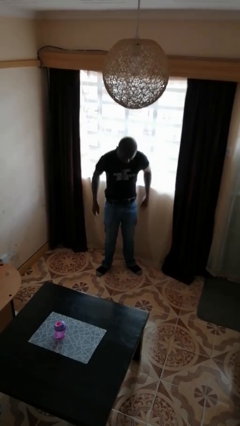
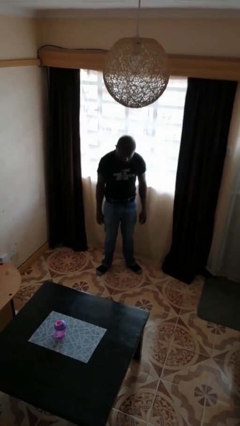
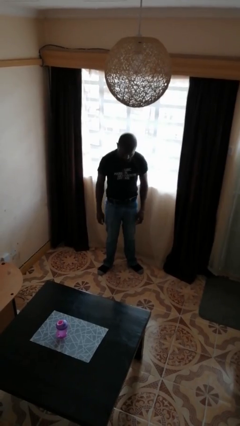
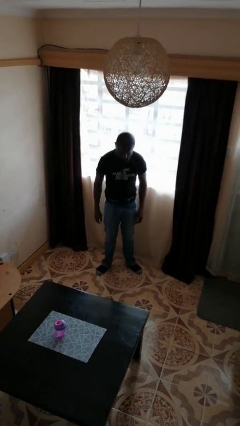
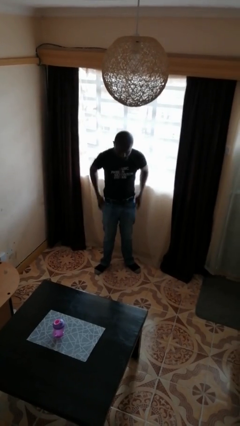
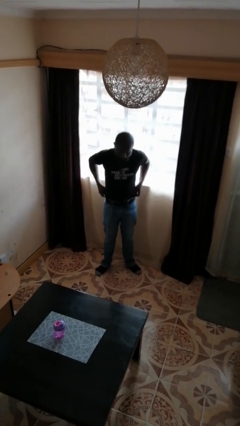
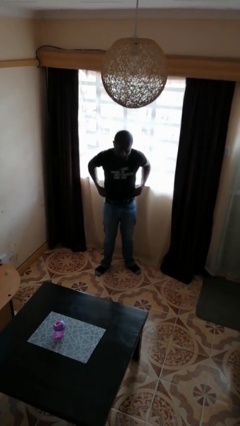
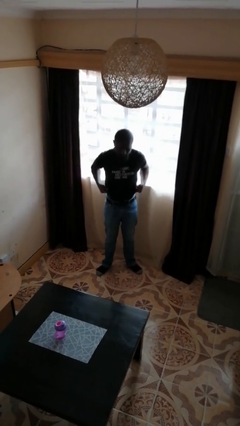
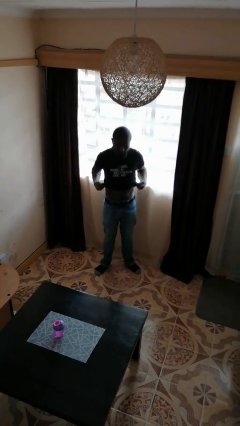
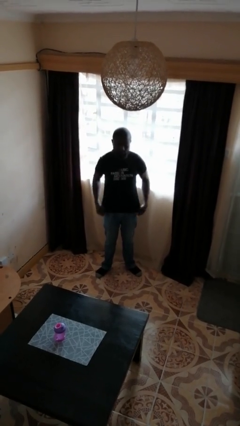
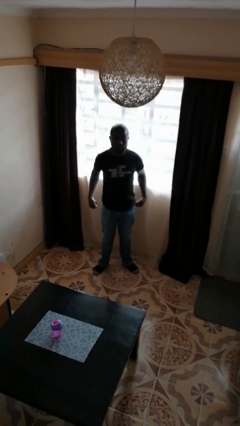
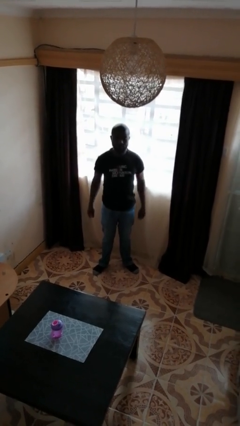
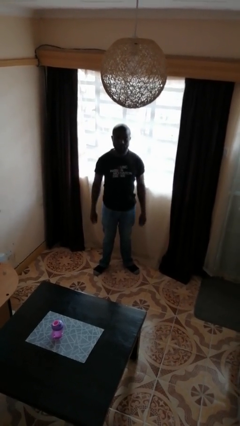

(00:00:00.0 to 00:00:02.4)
person untucks shirt

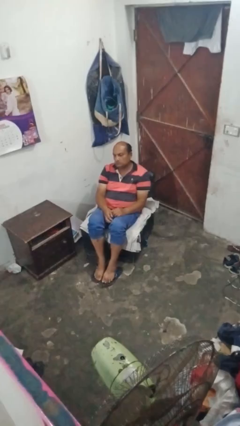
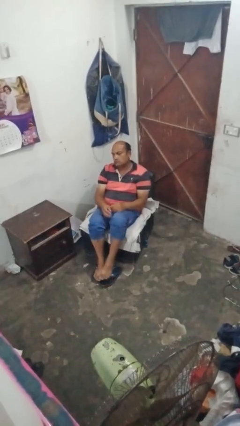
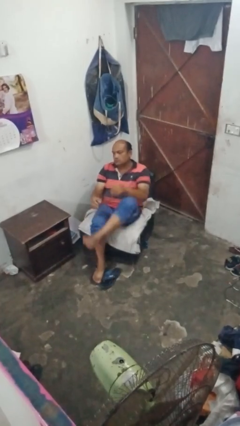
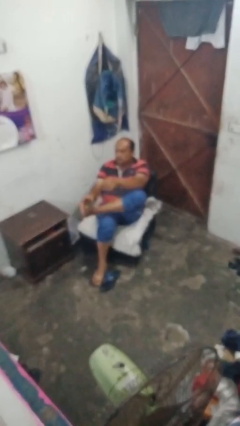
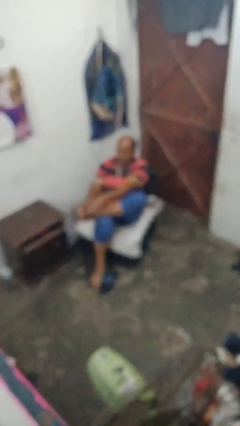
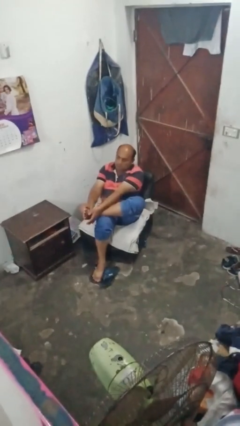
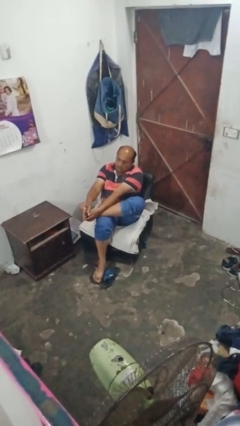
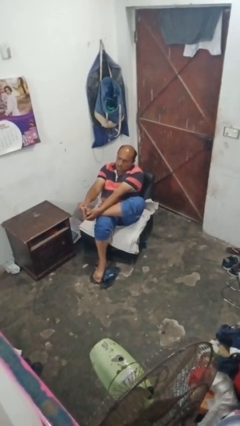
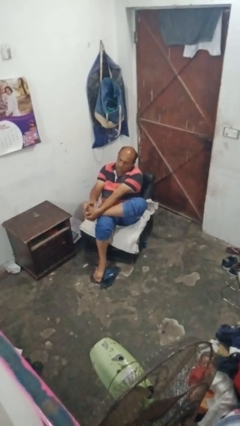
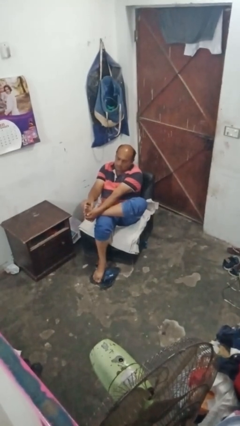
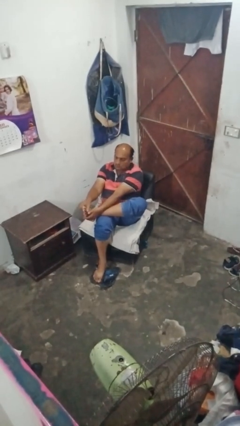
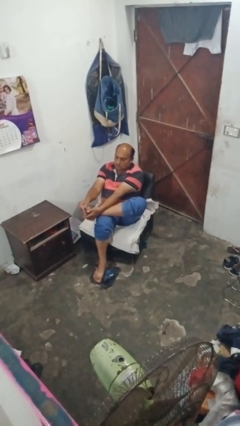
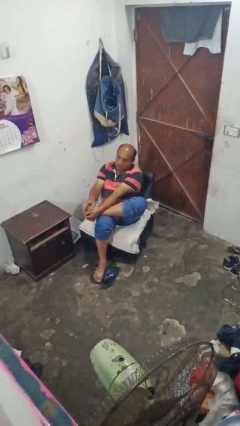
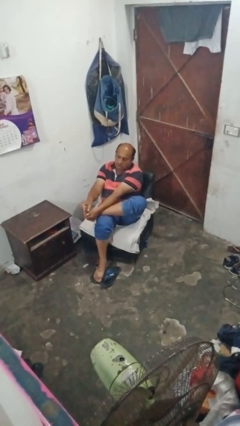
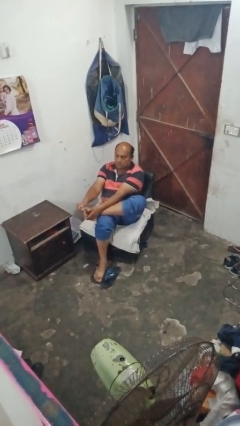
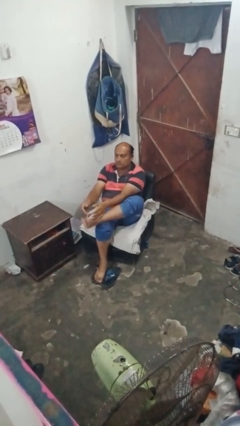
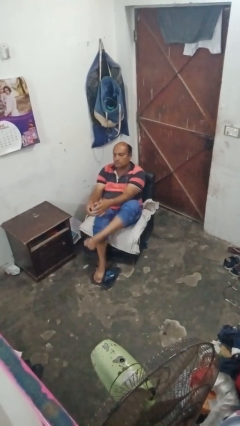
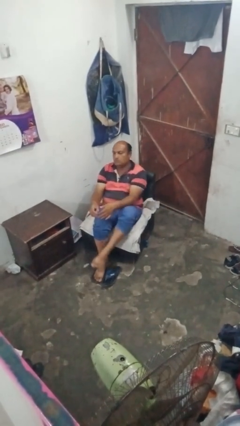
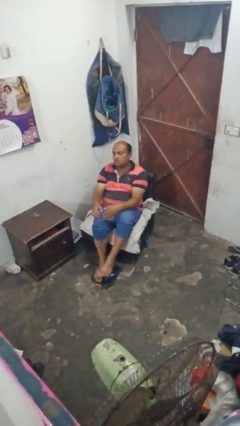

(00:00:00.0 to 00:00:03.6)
person rubs foot

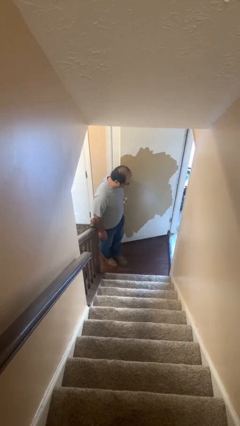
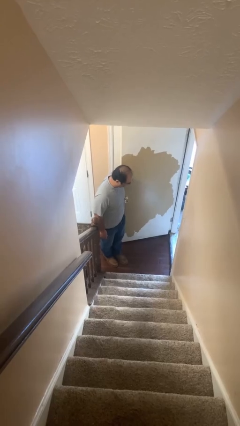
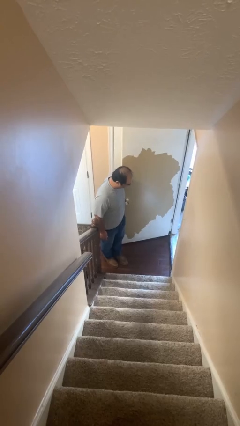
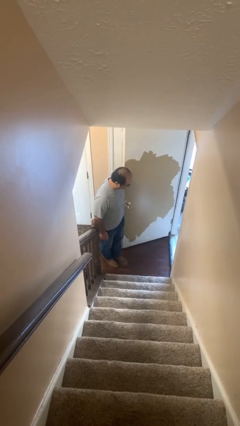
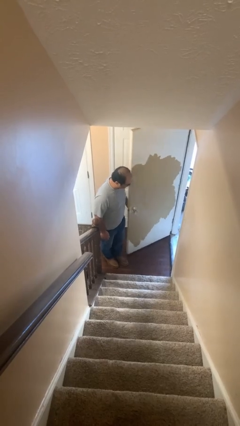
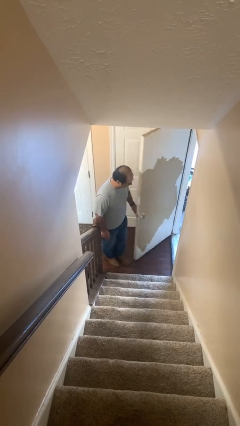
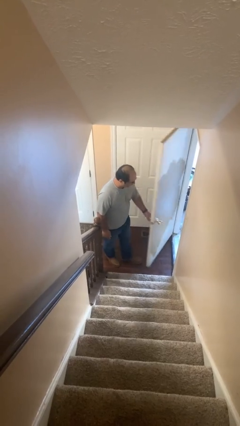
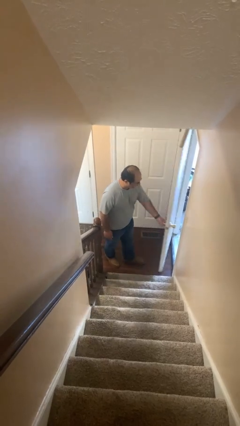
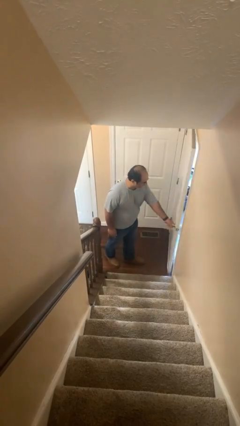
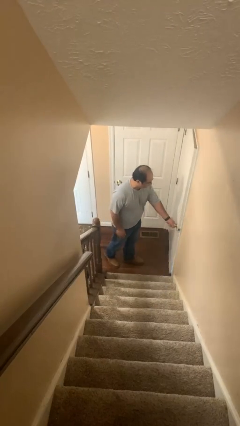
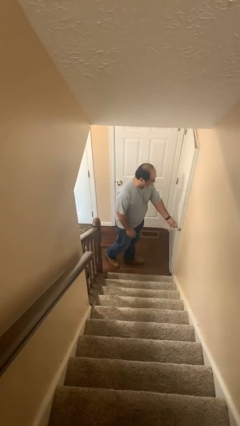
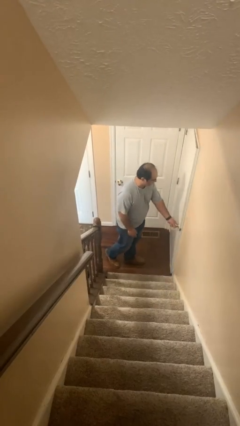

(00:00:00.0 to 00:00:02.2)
person closes facility door

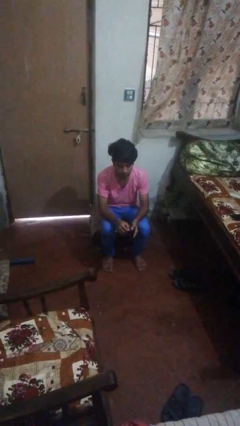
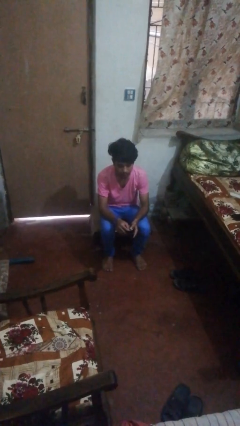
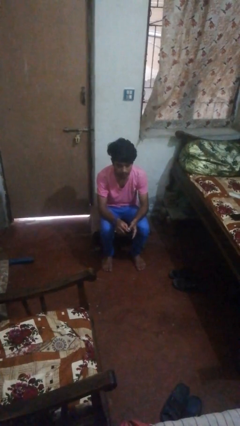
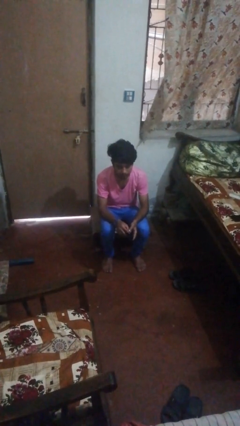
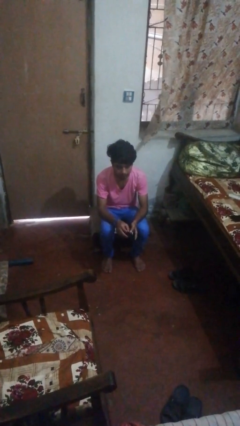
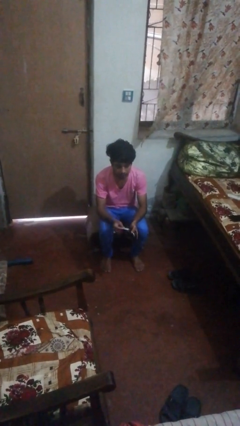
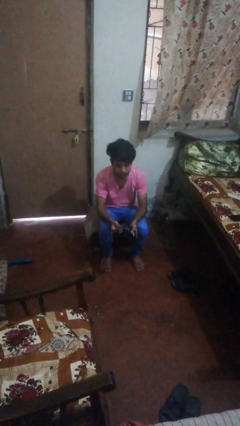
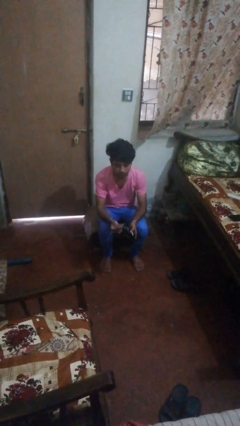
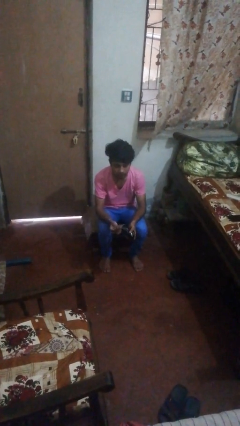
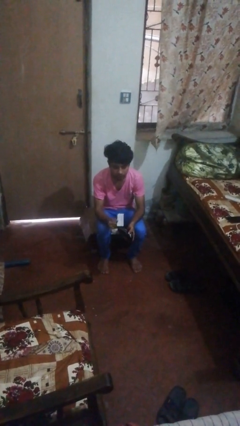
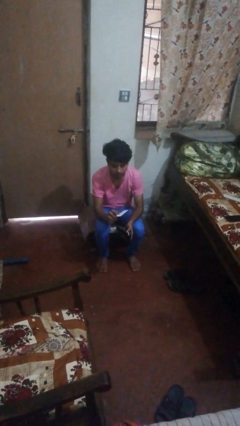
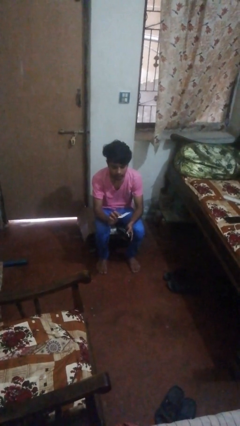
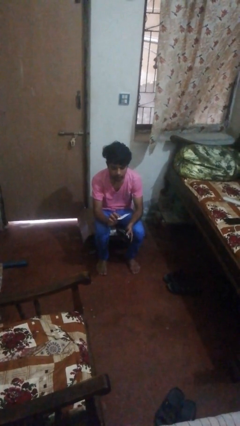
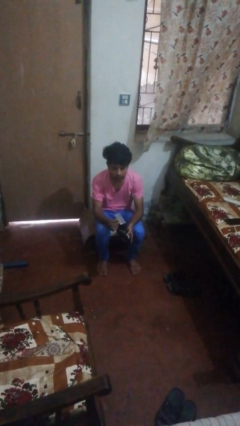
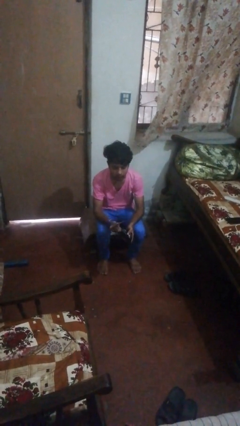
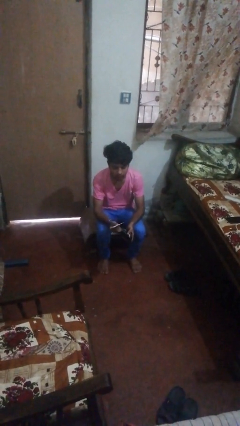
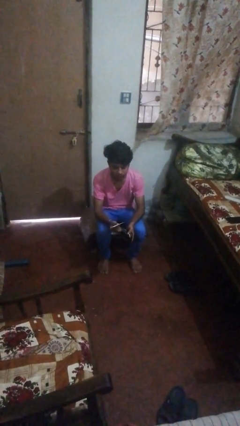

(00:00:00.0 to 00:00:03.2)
person takes object from purse

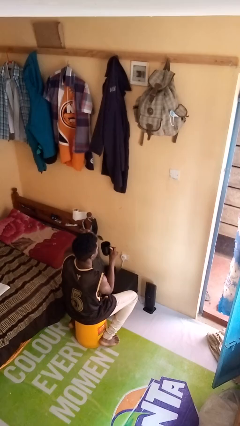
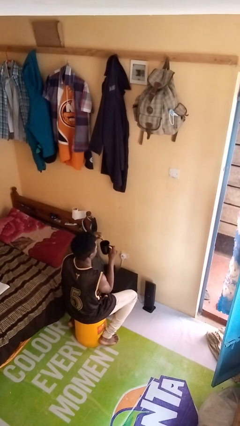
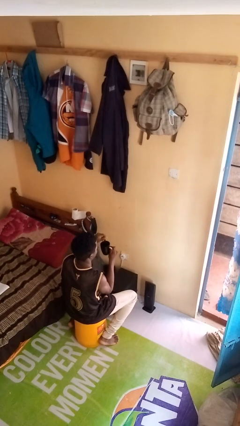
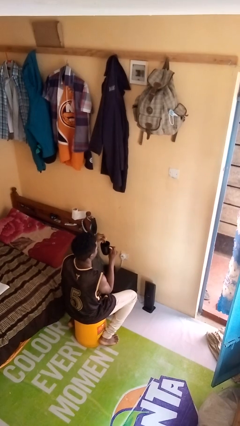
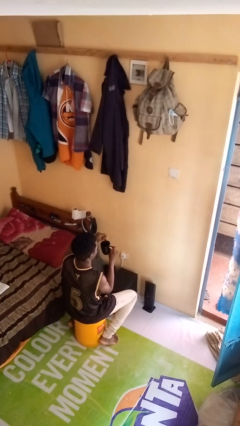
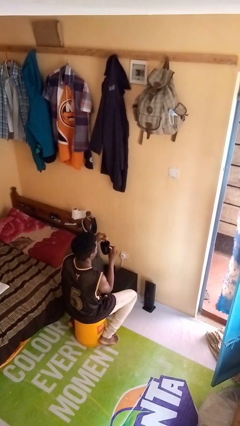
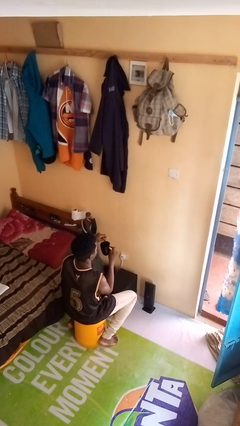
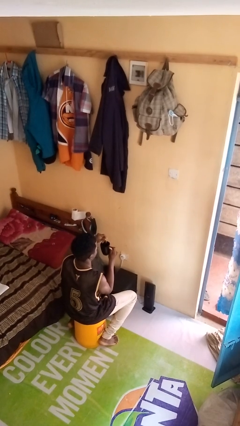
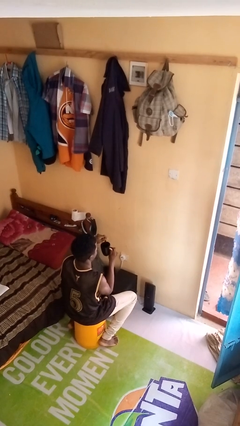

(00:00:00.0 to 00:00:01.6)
person stirs mug

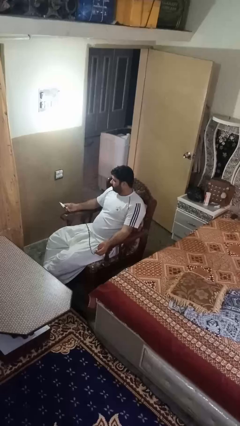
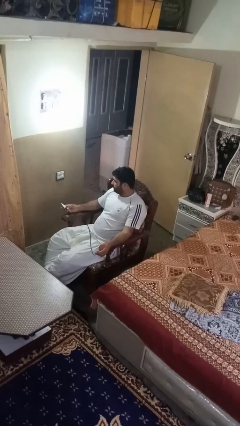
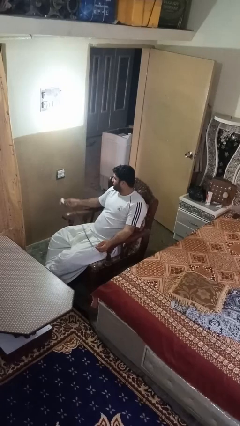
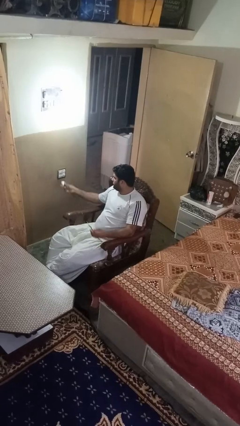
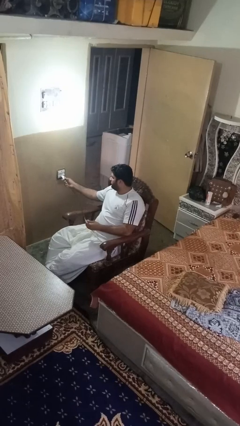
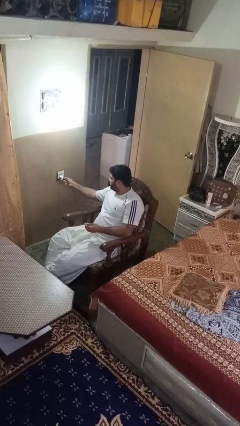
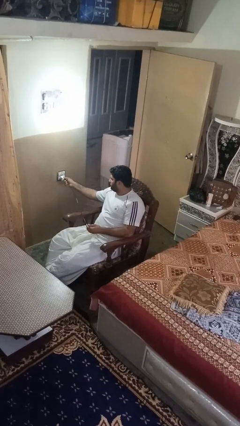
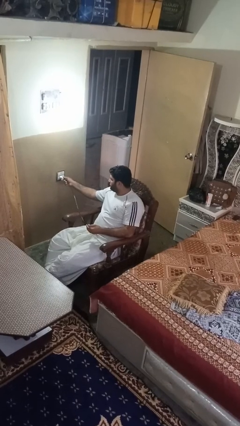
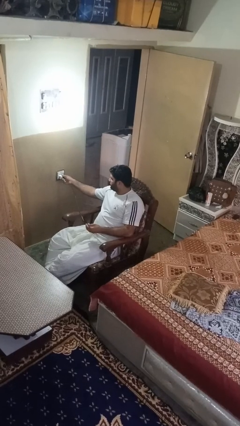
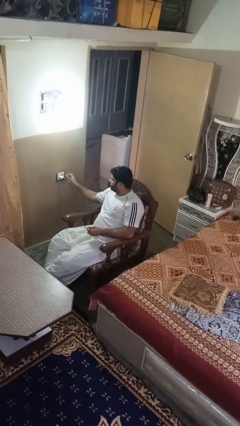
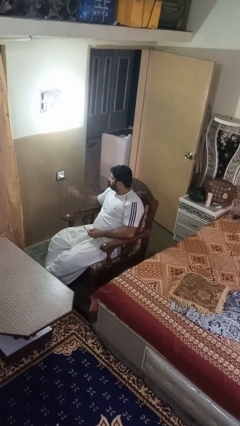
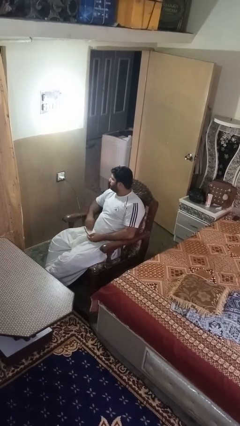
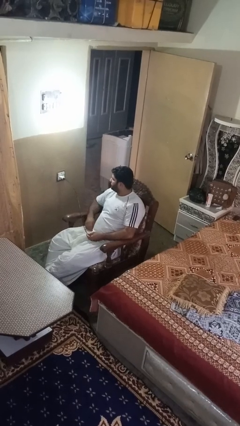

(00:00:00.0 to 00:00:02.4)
person plugs into electrical socket

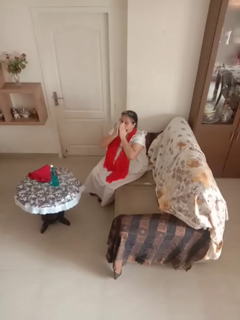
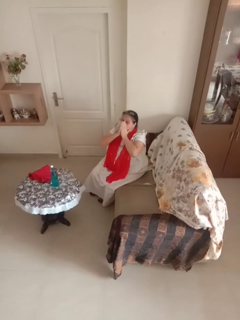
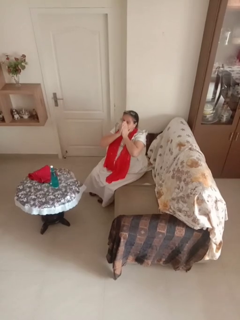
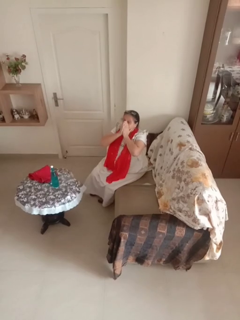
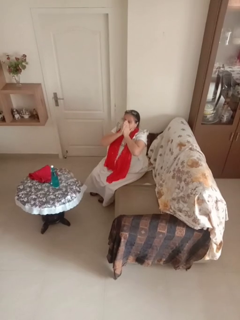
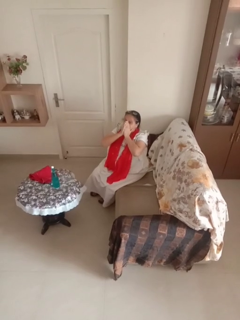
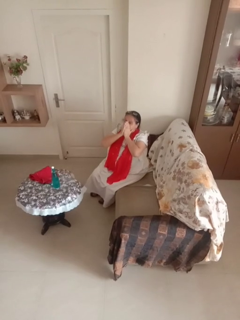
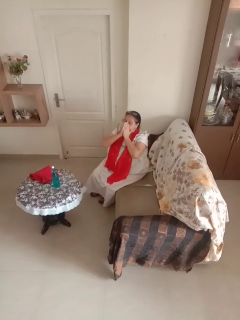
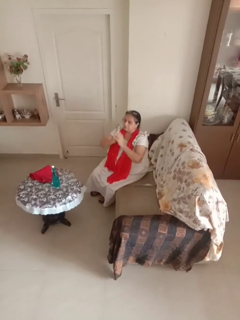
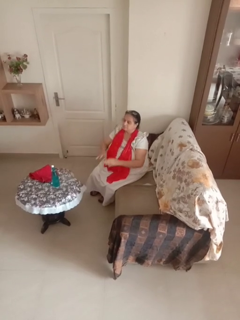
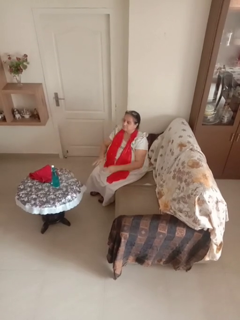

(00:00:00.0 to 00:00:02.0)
person covers face with hands

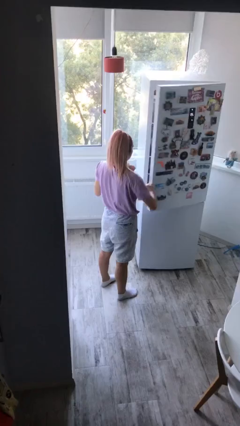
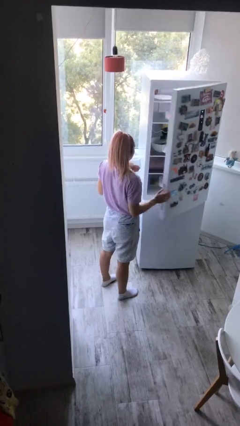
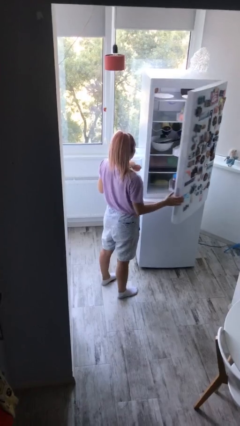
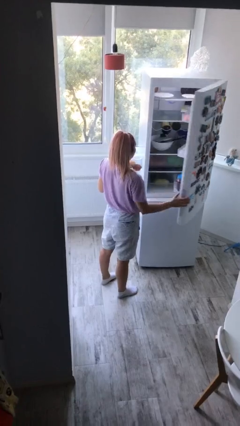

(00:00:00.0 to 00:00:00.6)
person opens refrigerator
